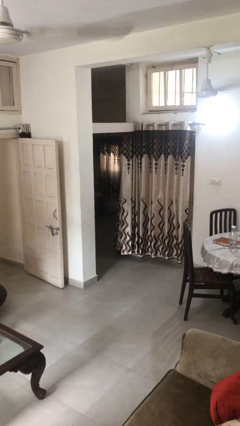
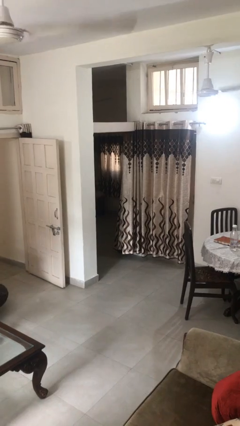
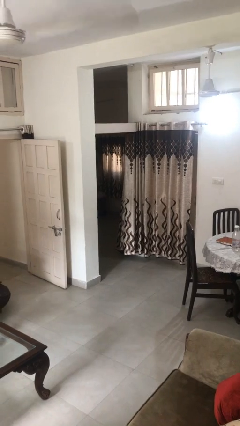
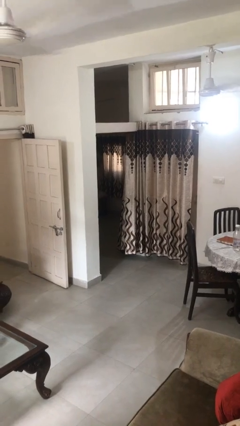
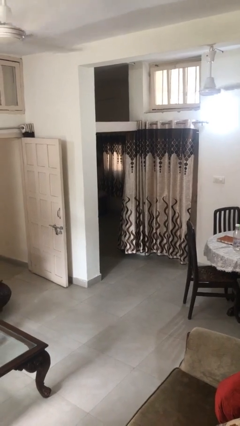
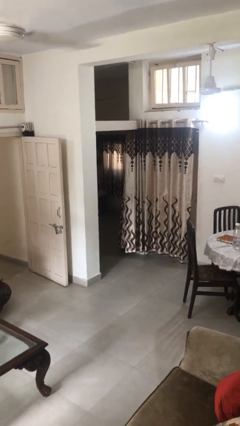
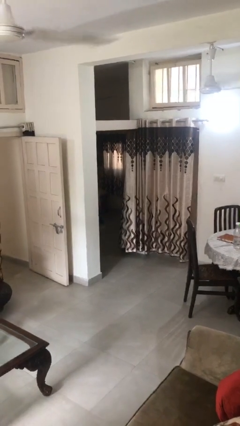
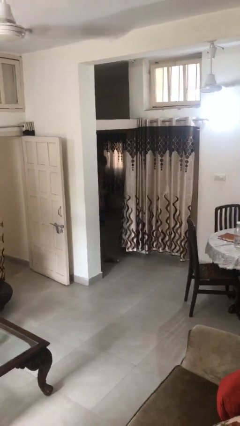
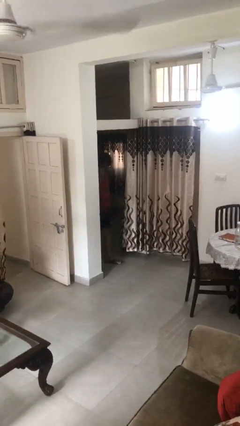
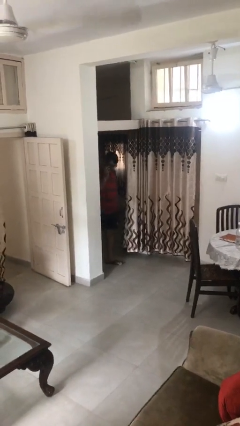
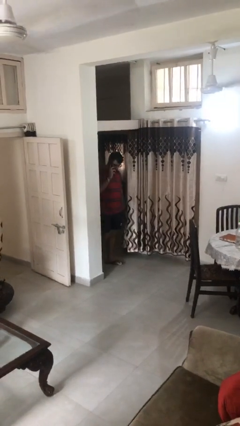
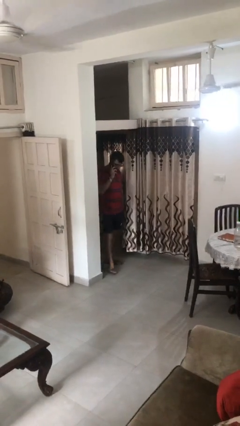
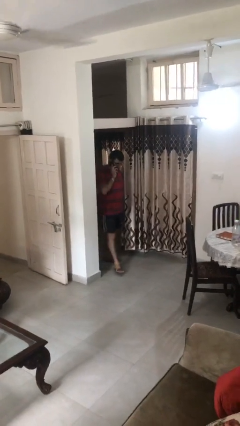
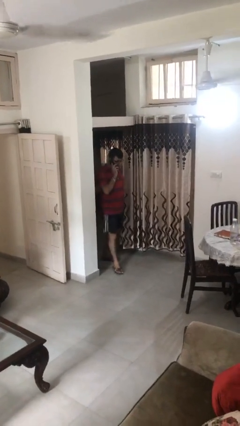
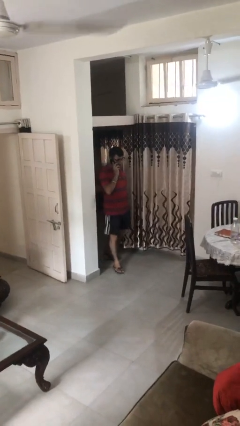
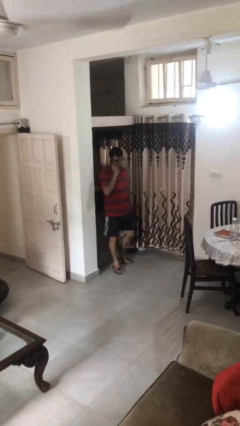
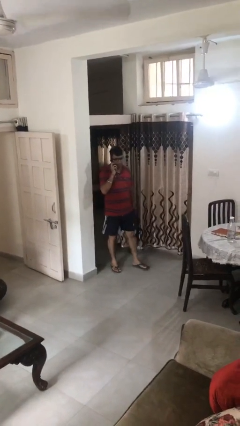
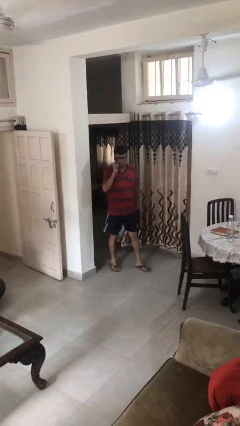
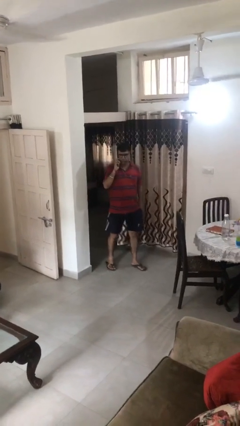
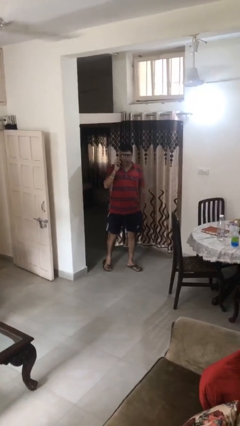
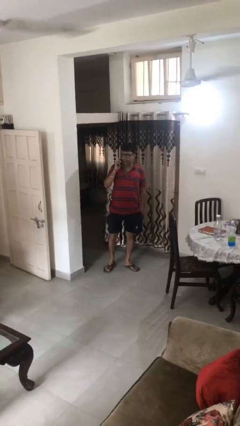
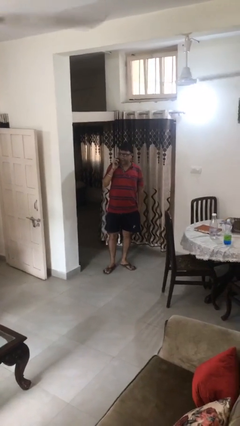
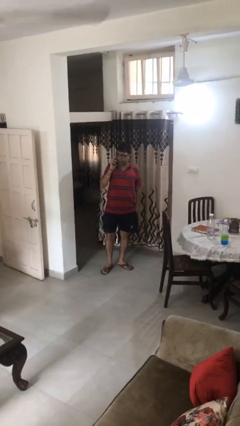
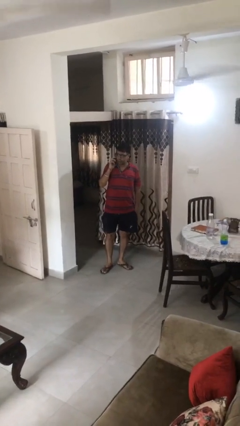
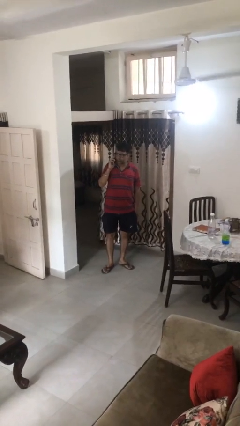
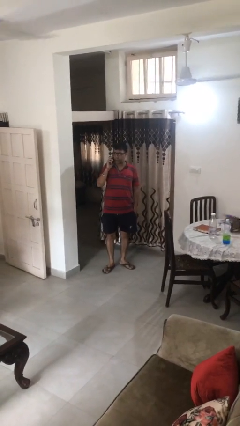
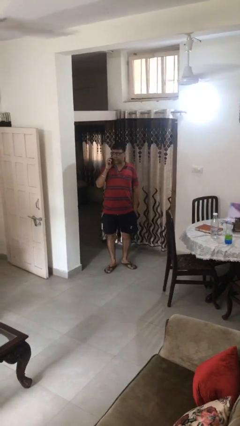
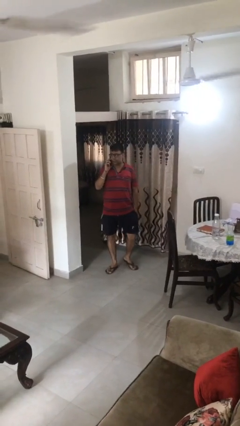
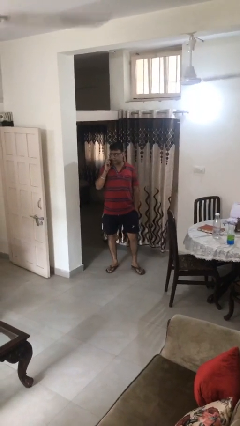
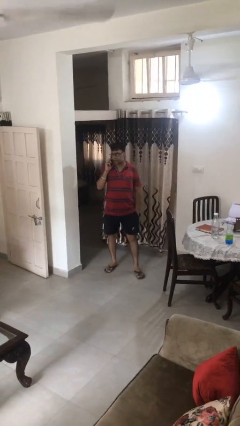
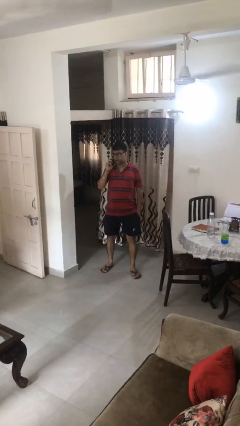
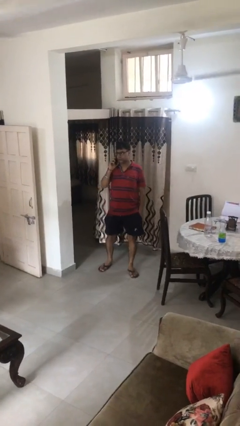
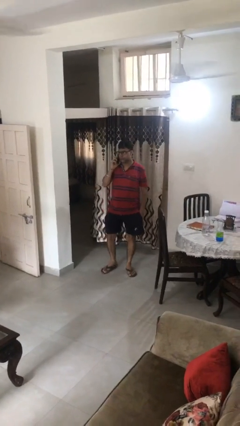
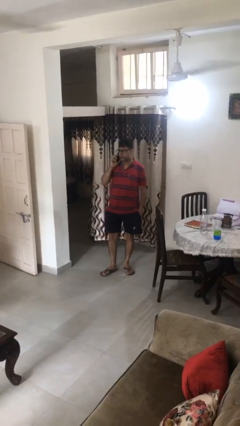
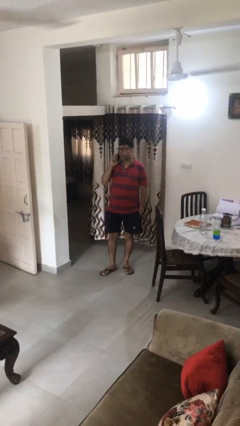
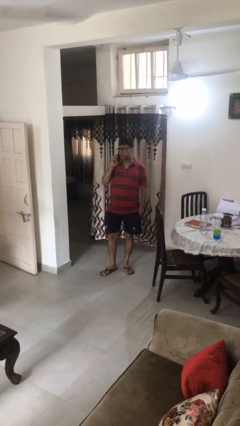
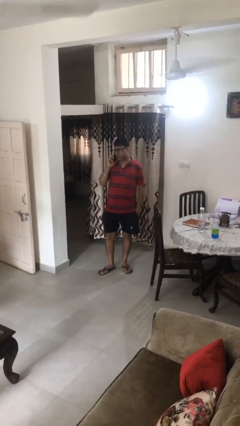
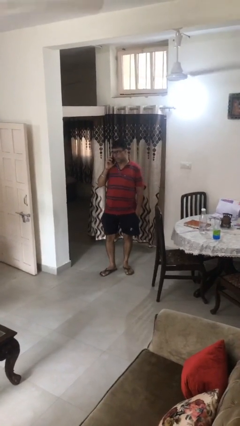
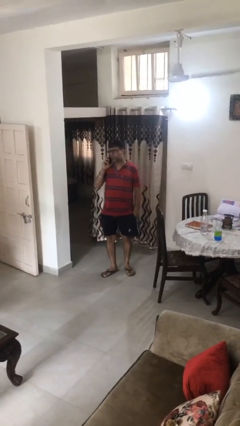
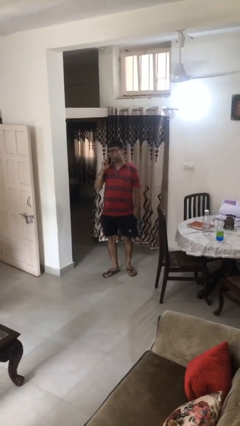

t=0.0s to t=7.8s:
person enters scene through structure

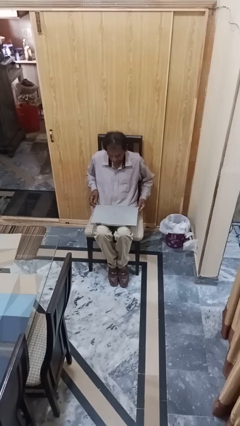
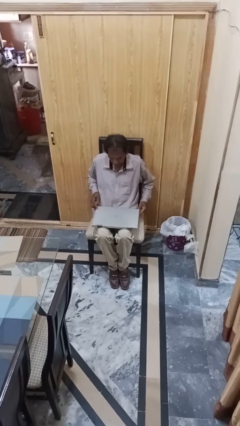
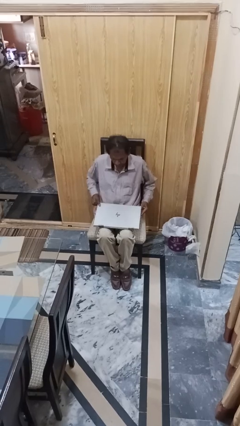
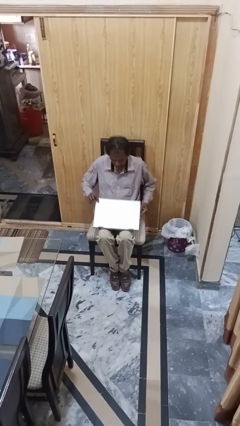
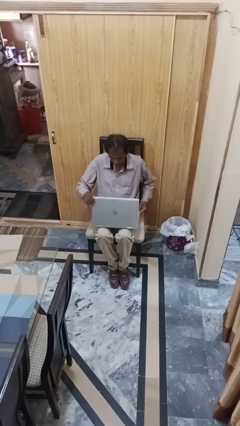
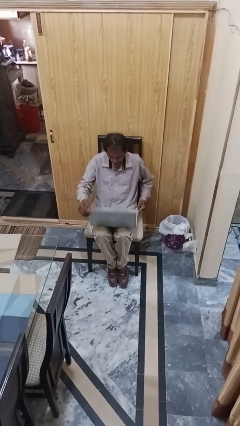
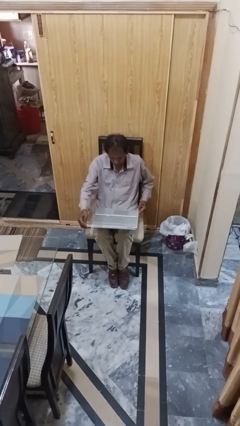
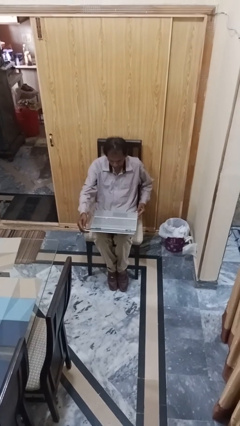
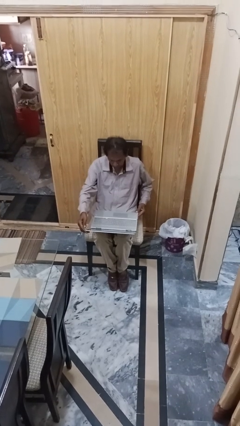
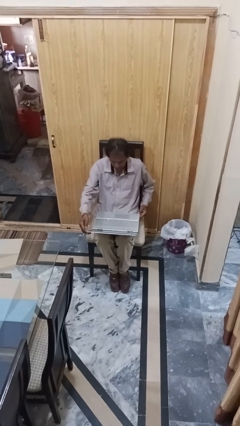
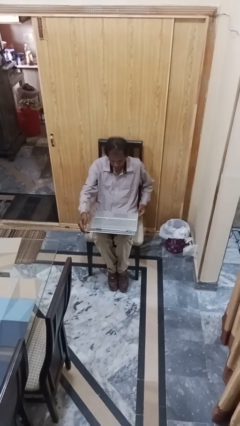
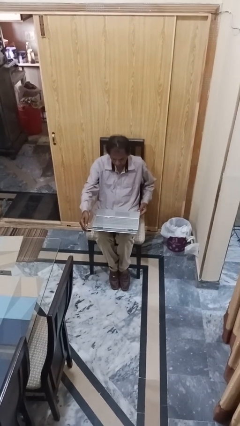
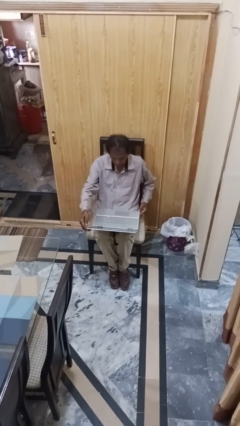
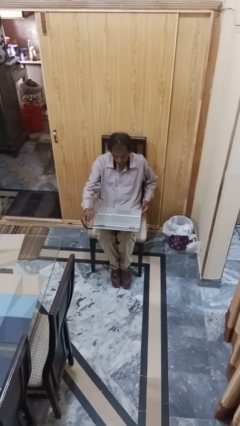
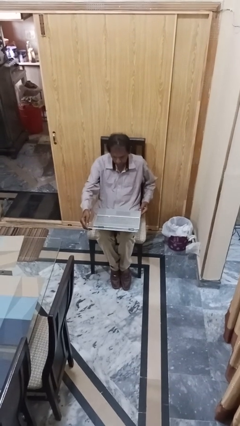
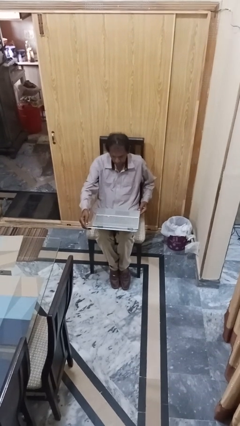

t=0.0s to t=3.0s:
person opens laptop

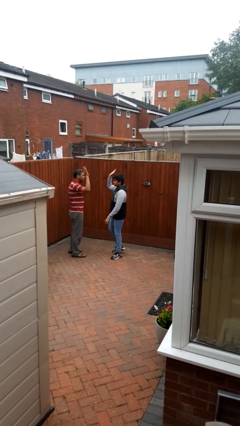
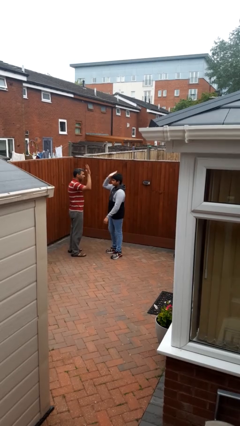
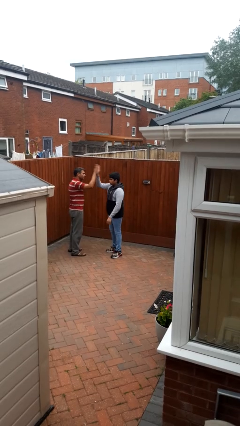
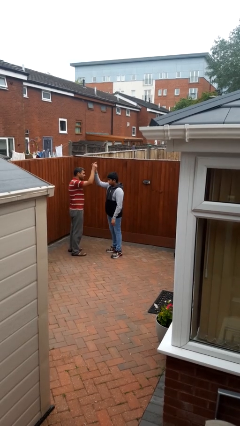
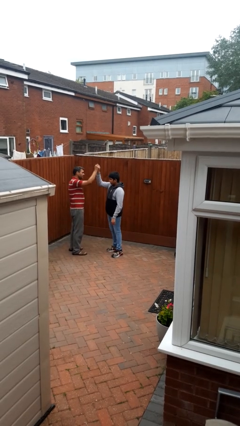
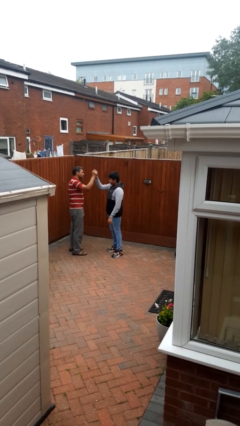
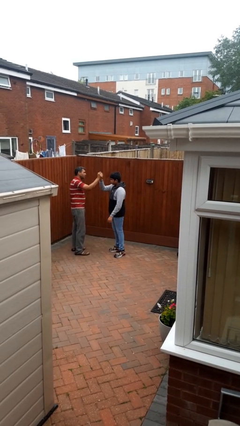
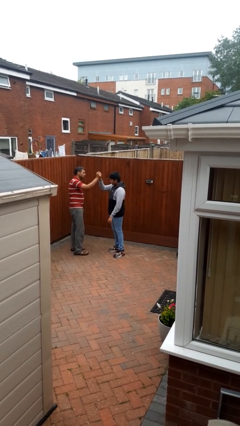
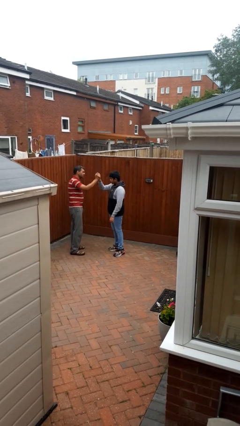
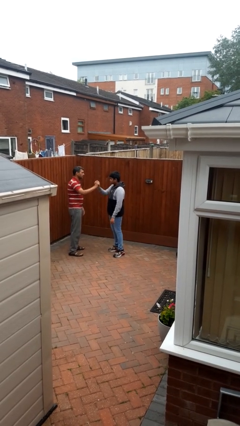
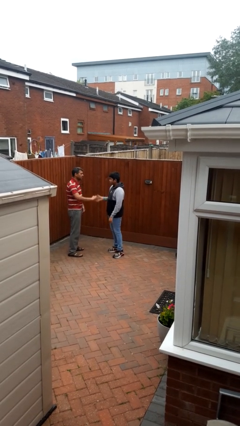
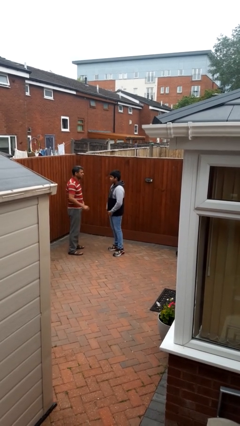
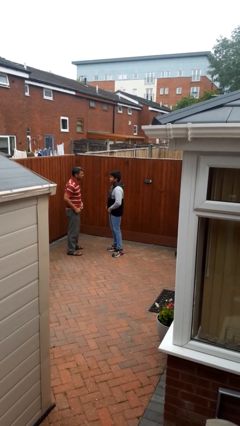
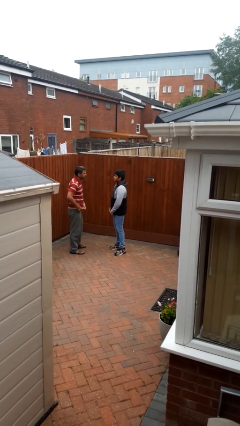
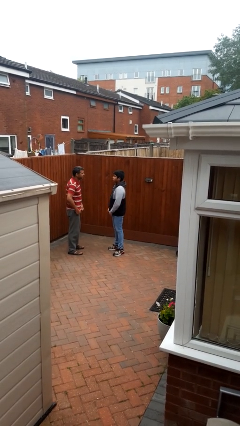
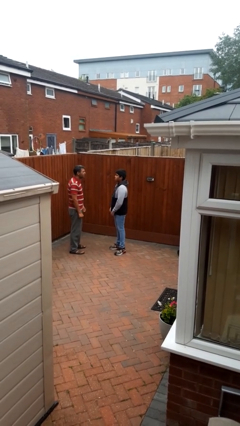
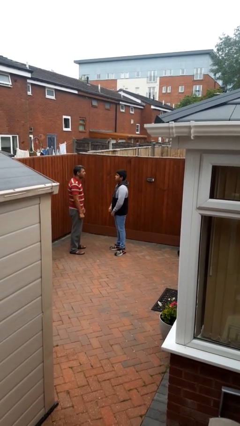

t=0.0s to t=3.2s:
person highfives hand

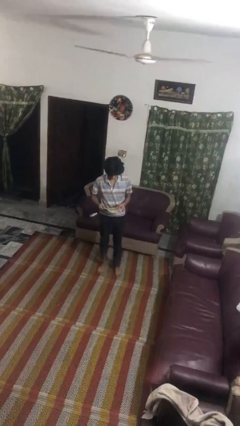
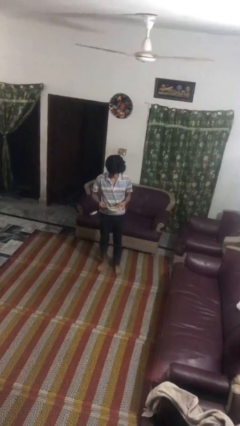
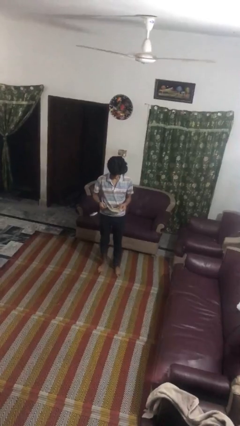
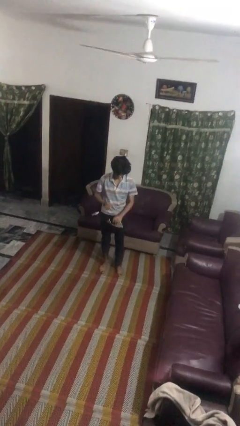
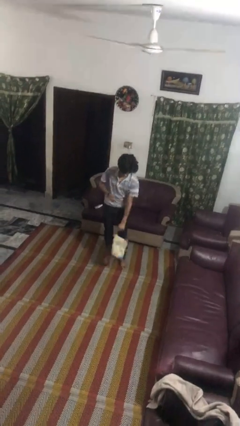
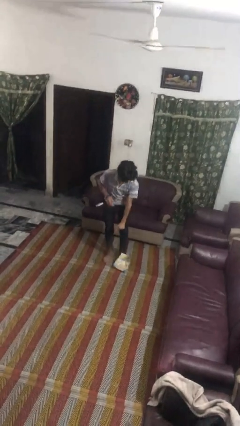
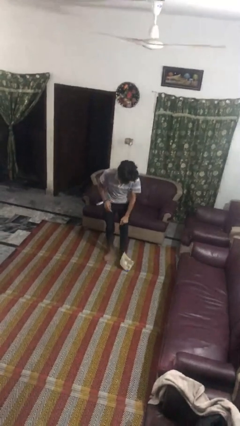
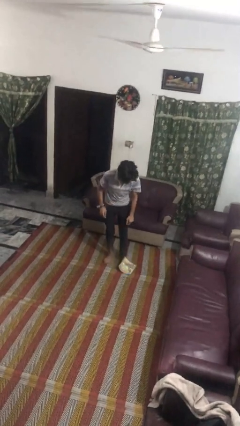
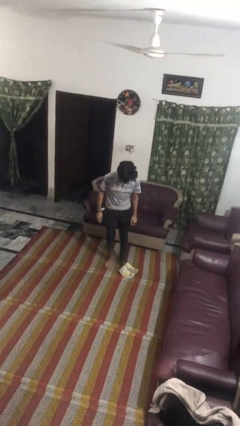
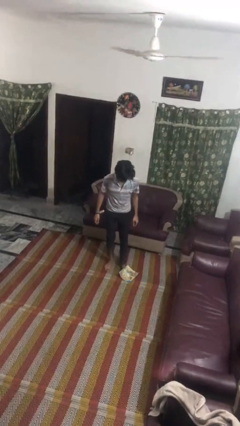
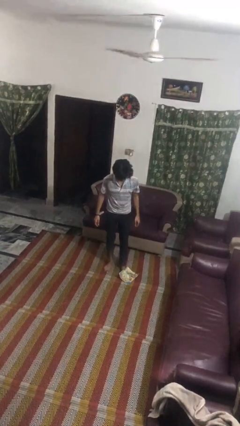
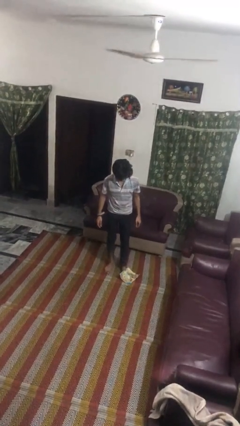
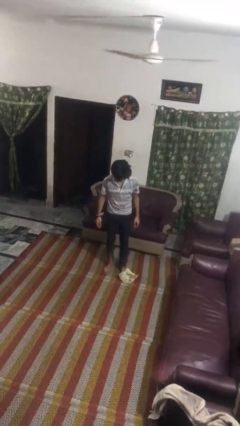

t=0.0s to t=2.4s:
person drops object

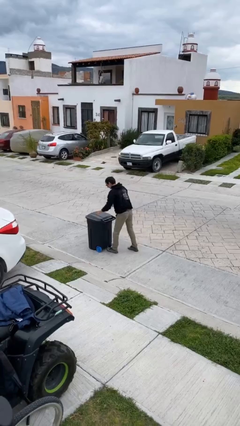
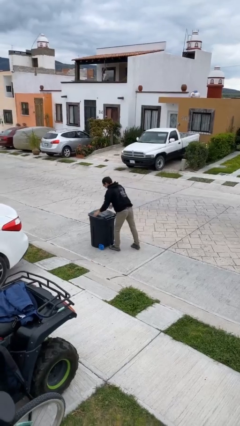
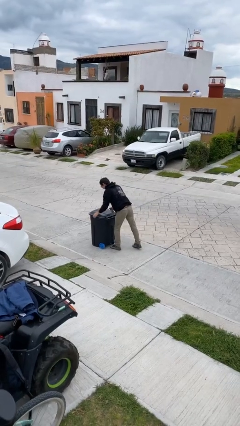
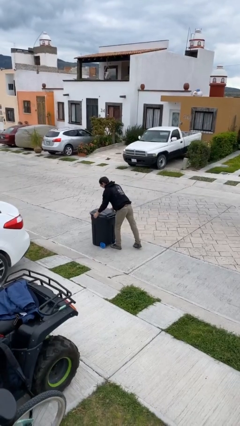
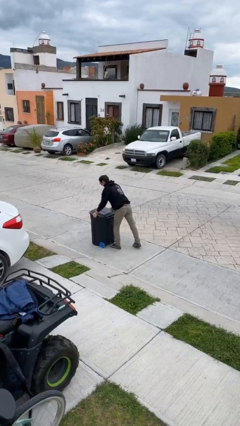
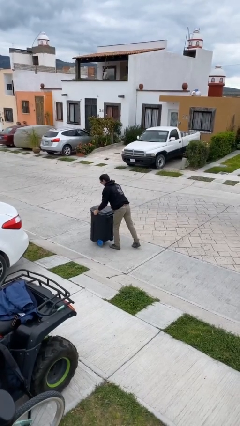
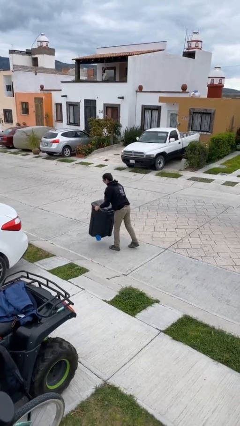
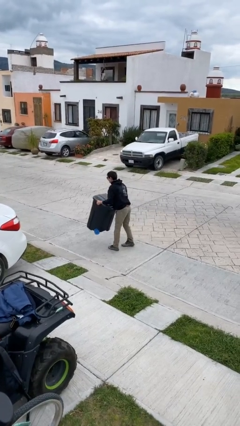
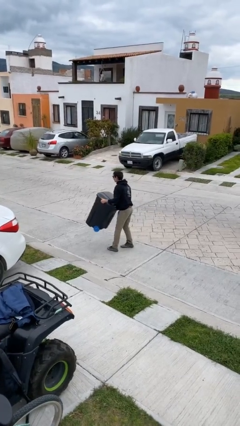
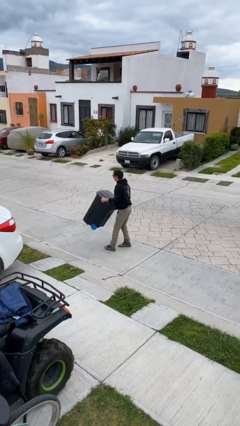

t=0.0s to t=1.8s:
person picks up object from floor
